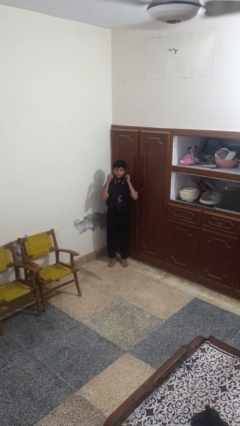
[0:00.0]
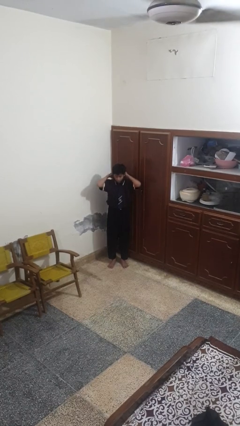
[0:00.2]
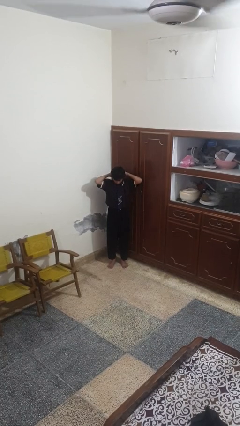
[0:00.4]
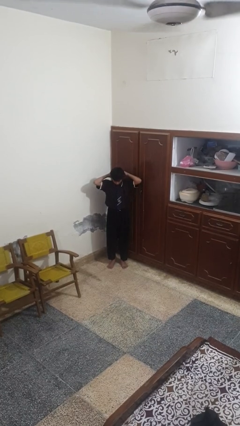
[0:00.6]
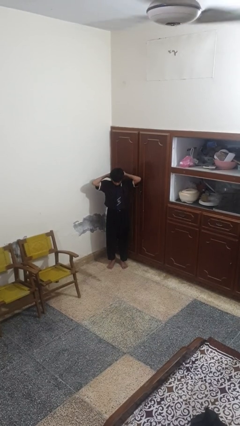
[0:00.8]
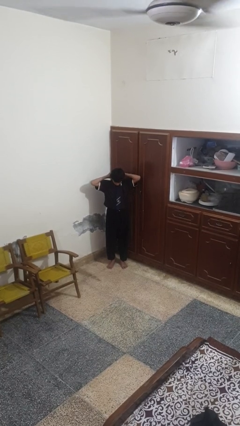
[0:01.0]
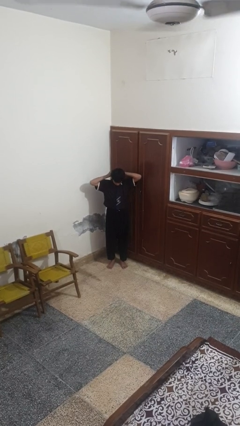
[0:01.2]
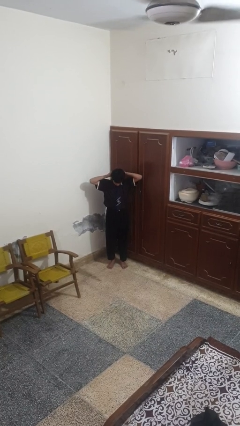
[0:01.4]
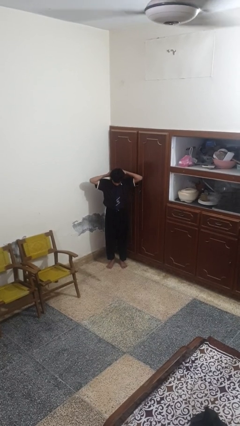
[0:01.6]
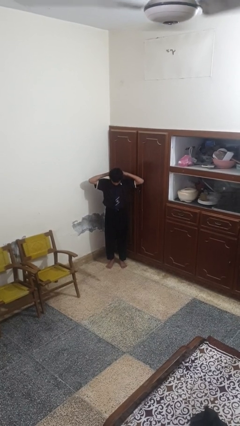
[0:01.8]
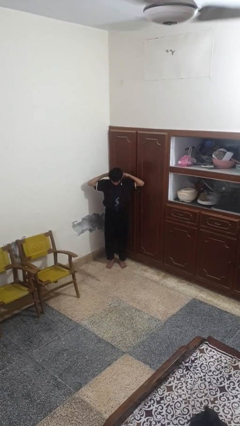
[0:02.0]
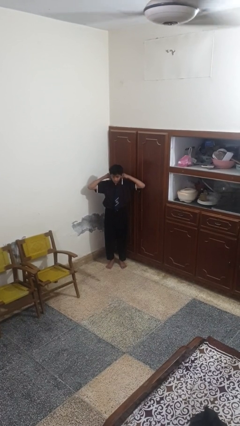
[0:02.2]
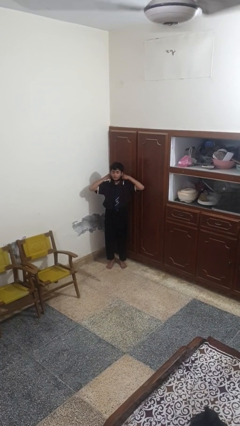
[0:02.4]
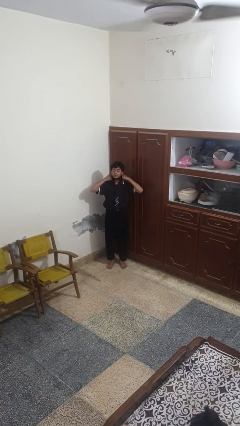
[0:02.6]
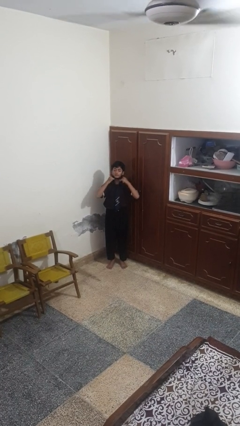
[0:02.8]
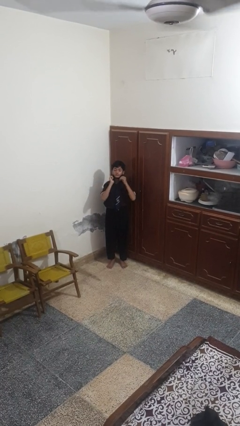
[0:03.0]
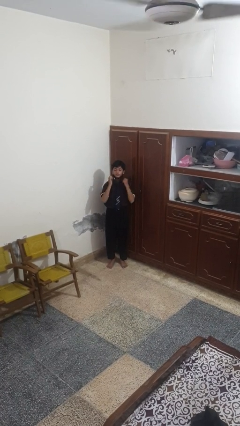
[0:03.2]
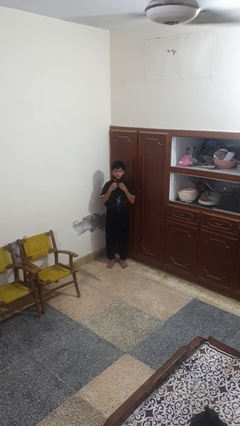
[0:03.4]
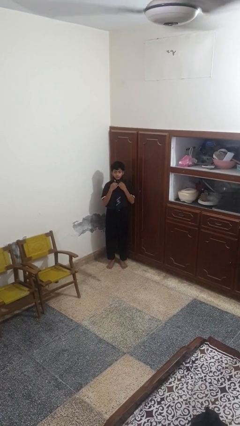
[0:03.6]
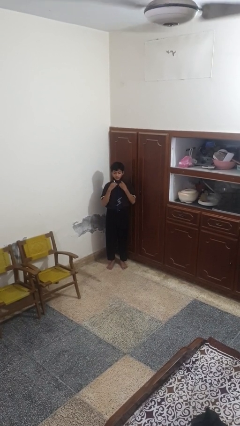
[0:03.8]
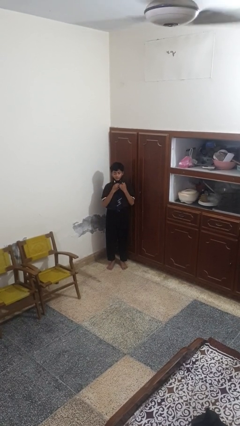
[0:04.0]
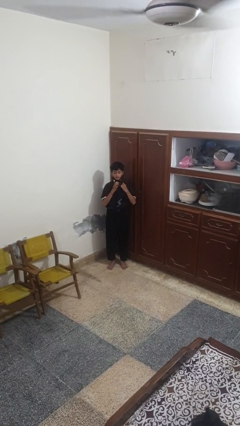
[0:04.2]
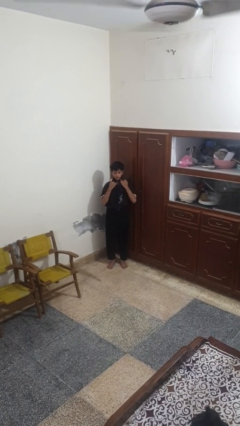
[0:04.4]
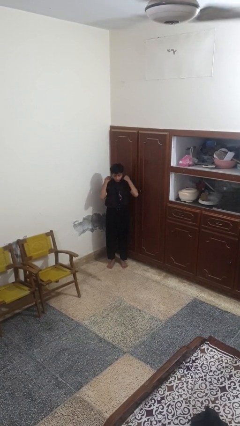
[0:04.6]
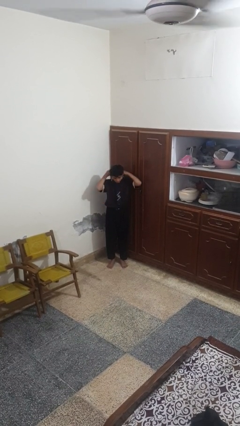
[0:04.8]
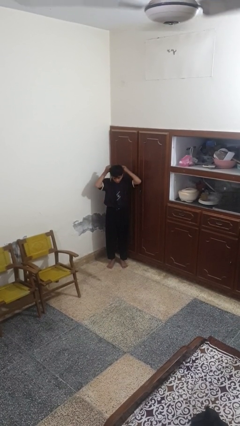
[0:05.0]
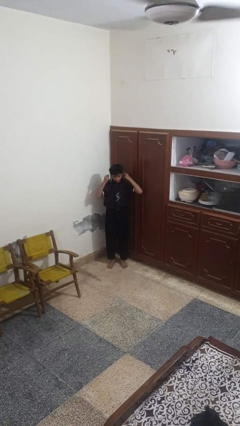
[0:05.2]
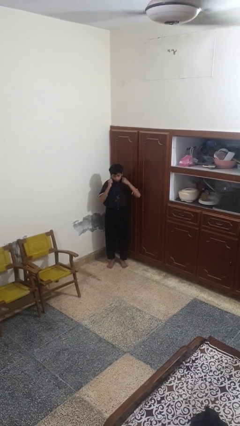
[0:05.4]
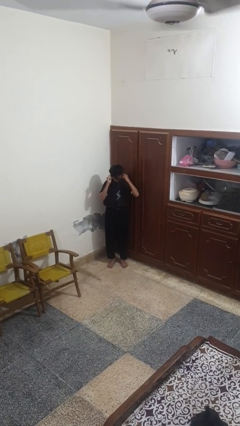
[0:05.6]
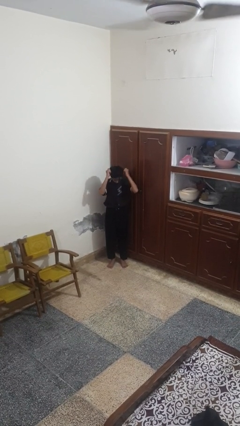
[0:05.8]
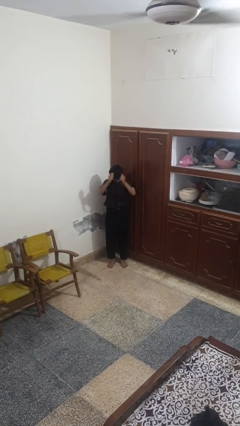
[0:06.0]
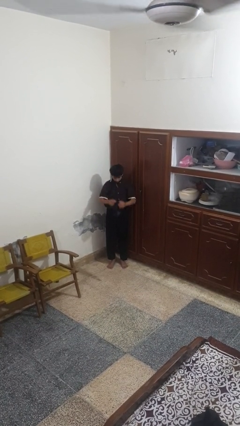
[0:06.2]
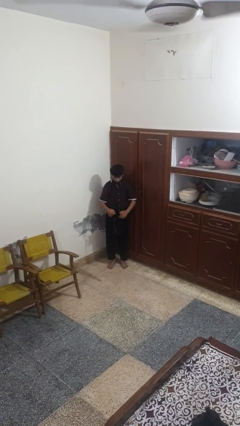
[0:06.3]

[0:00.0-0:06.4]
person takes off necktie

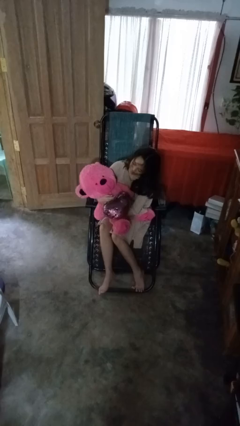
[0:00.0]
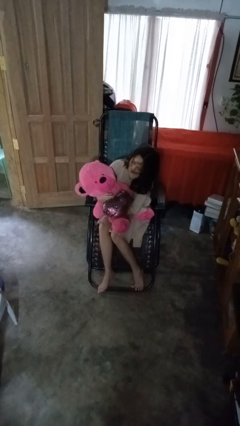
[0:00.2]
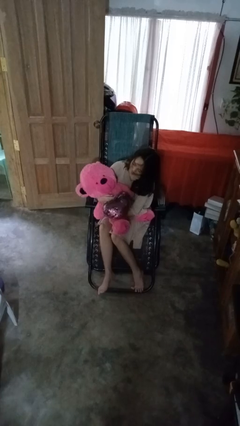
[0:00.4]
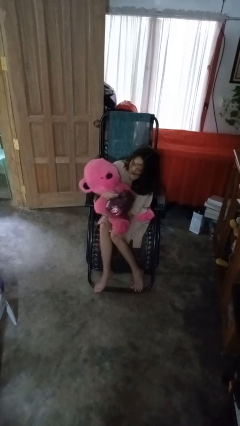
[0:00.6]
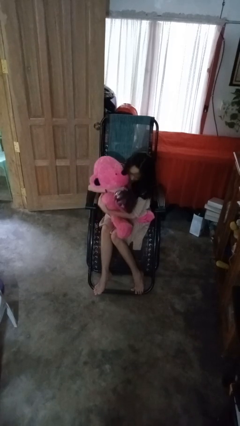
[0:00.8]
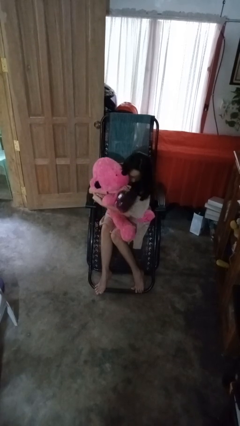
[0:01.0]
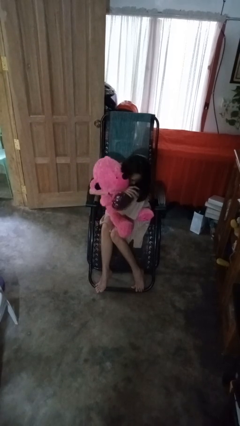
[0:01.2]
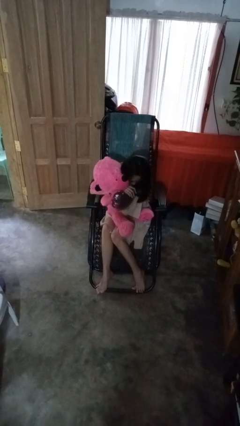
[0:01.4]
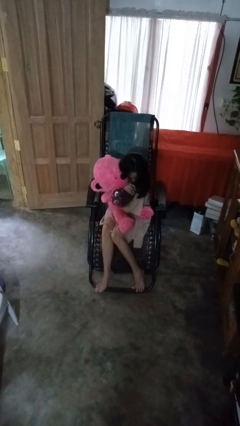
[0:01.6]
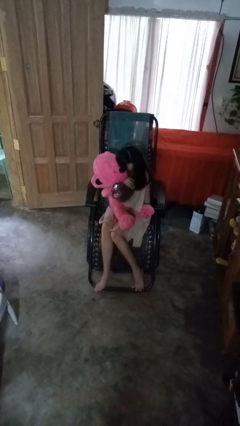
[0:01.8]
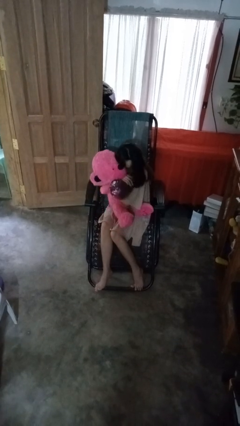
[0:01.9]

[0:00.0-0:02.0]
person hugs stuffed animal

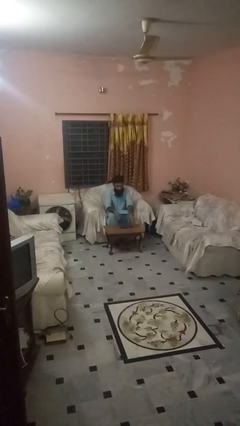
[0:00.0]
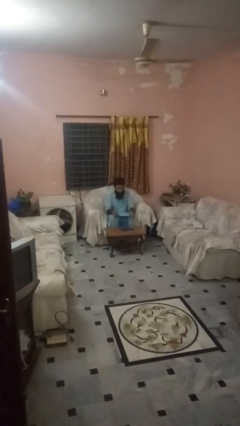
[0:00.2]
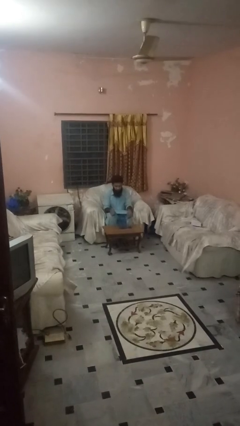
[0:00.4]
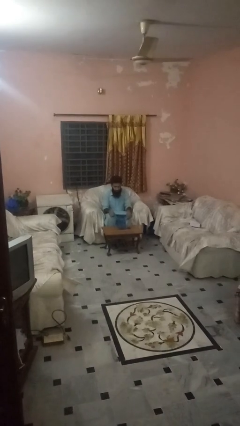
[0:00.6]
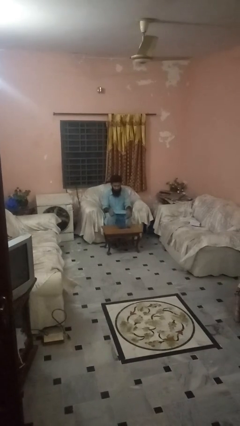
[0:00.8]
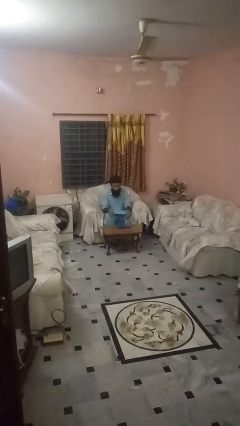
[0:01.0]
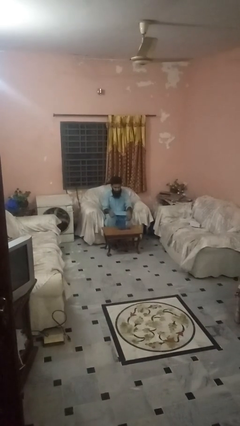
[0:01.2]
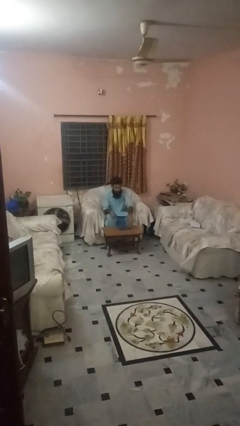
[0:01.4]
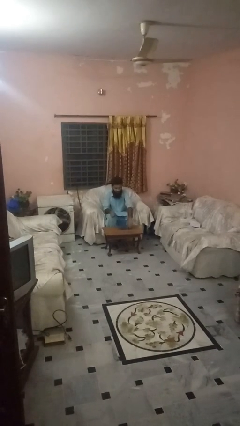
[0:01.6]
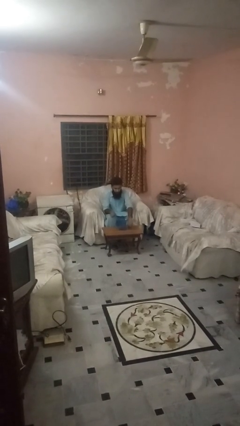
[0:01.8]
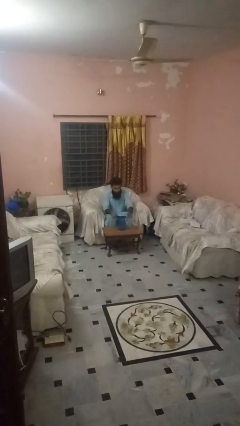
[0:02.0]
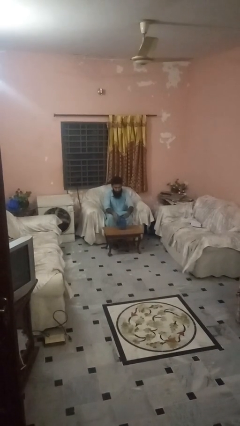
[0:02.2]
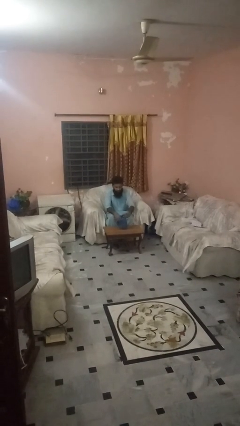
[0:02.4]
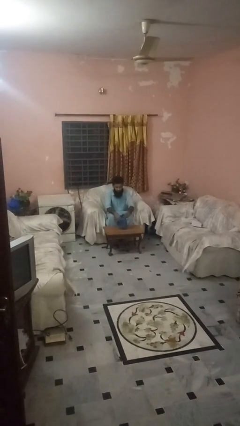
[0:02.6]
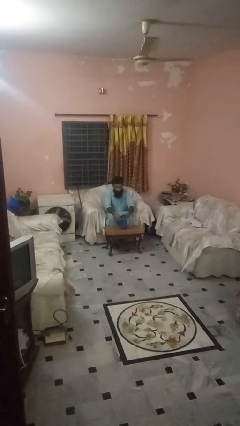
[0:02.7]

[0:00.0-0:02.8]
person screws lid to bottle

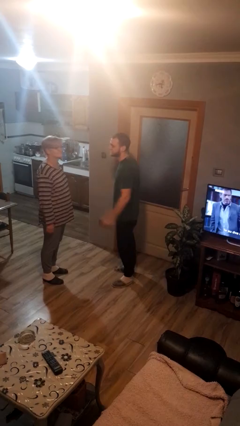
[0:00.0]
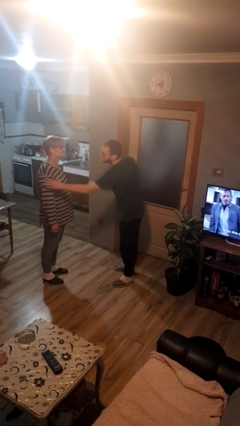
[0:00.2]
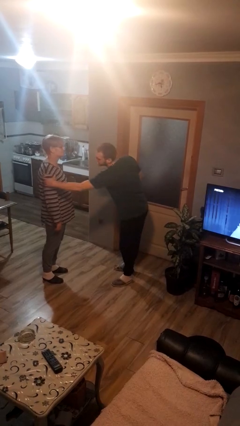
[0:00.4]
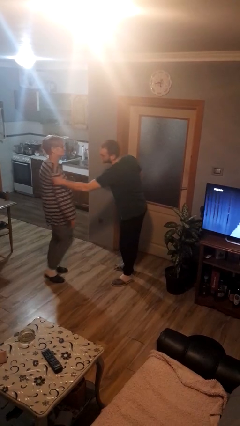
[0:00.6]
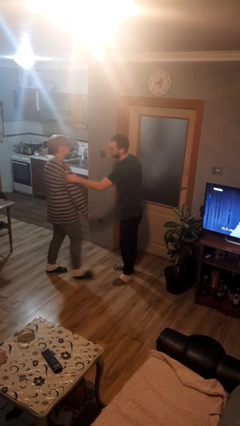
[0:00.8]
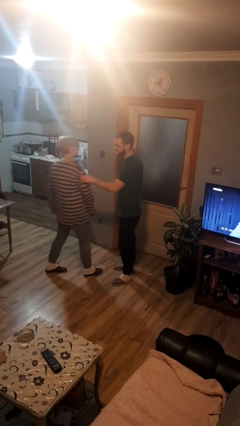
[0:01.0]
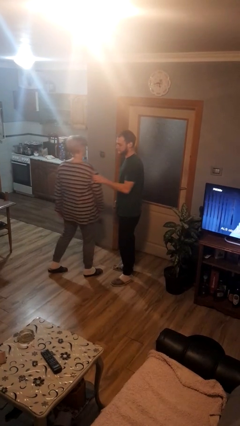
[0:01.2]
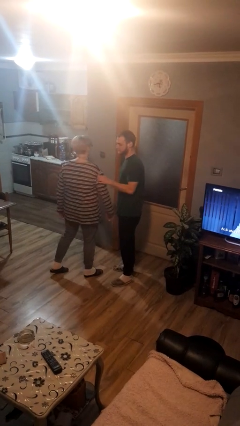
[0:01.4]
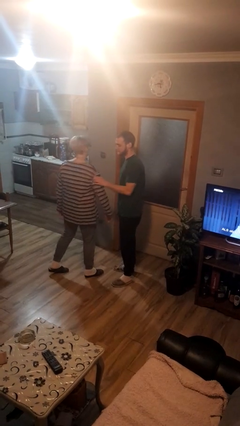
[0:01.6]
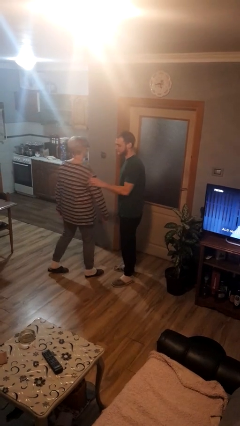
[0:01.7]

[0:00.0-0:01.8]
person grabs person by bicep

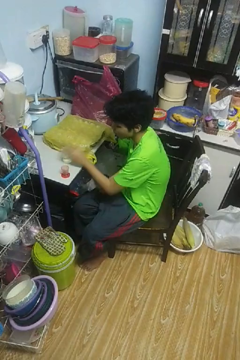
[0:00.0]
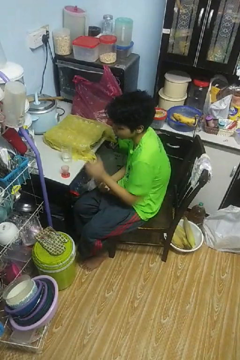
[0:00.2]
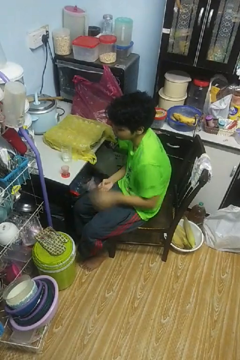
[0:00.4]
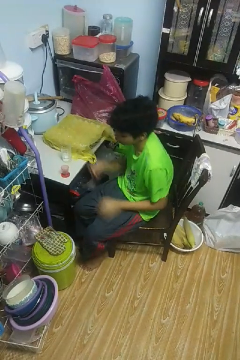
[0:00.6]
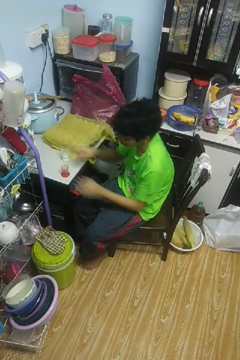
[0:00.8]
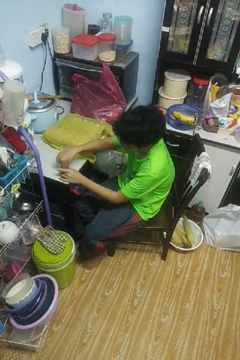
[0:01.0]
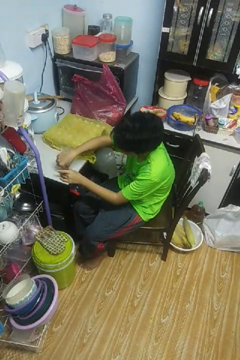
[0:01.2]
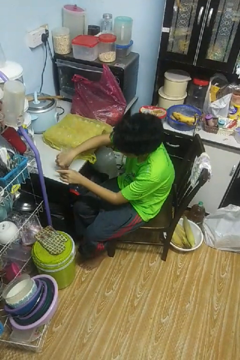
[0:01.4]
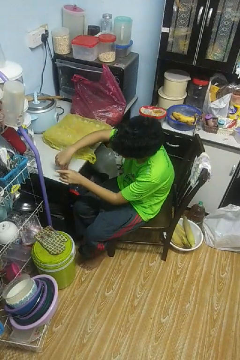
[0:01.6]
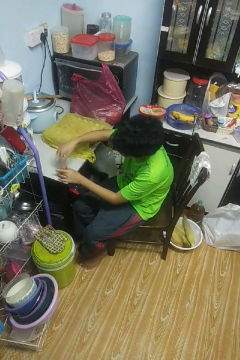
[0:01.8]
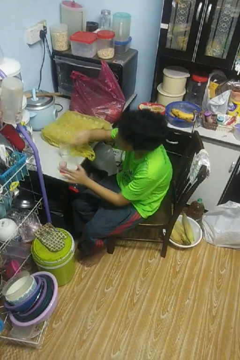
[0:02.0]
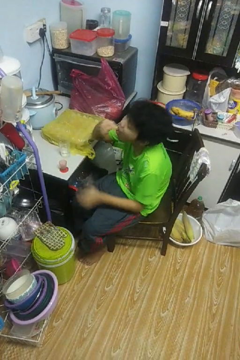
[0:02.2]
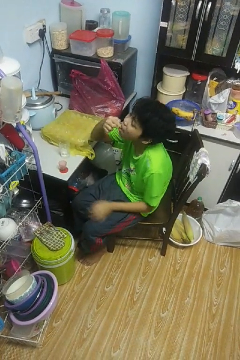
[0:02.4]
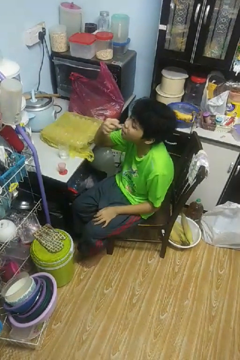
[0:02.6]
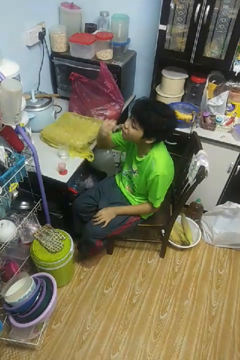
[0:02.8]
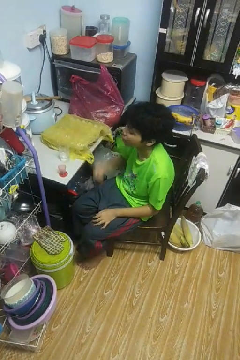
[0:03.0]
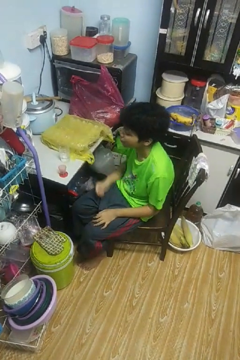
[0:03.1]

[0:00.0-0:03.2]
person takes medicine pills

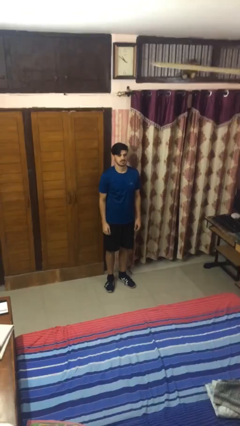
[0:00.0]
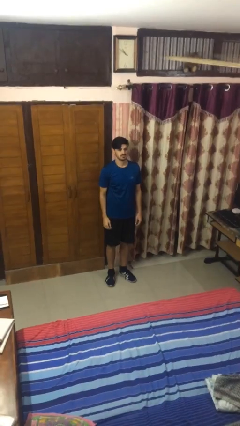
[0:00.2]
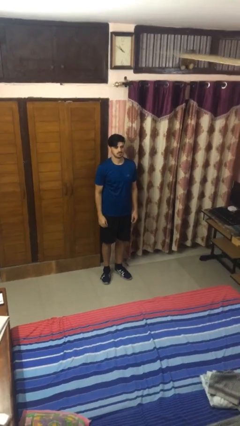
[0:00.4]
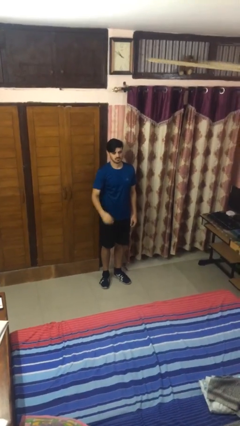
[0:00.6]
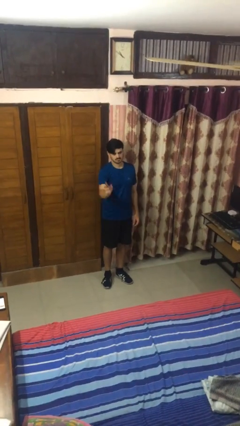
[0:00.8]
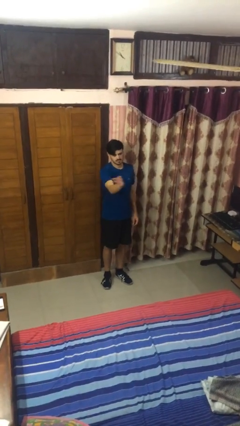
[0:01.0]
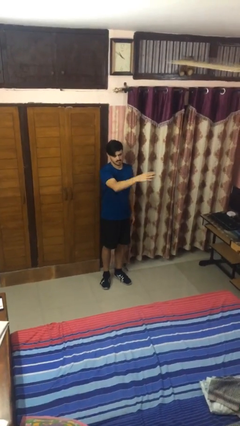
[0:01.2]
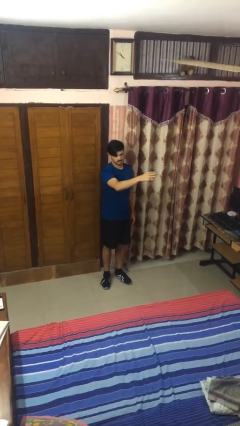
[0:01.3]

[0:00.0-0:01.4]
person gestures swipe left

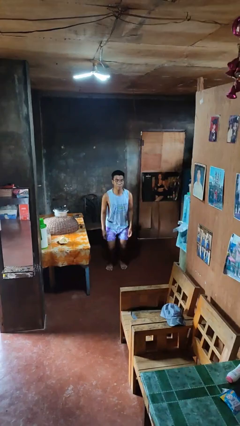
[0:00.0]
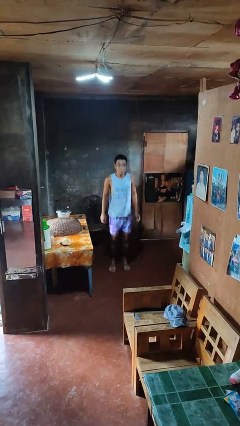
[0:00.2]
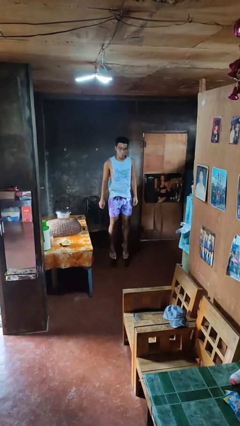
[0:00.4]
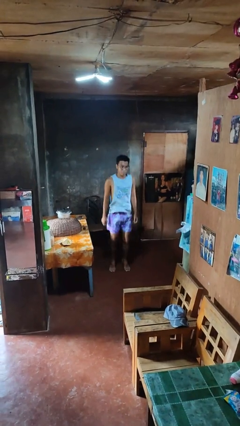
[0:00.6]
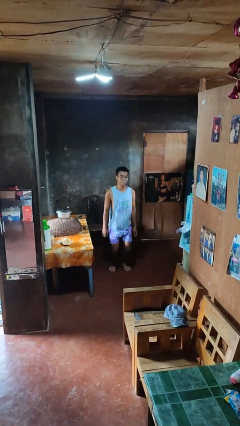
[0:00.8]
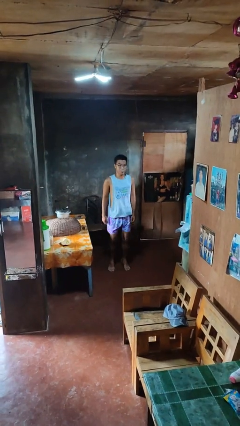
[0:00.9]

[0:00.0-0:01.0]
person jumps
